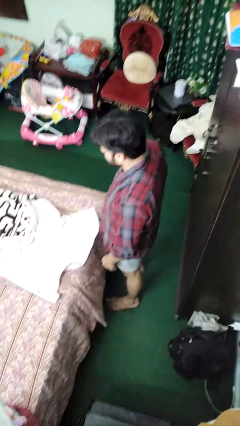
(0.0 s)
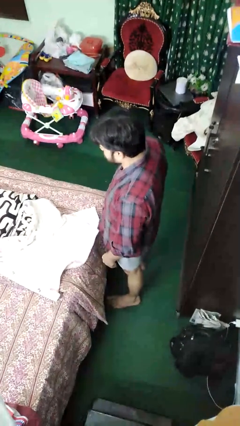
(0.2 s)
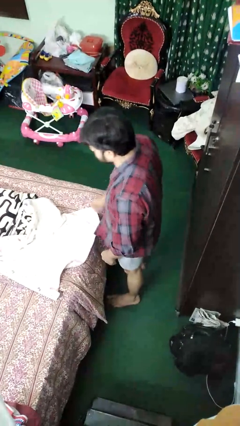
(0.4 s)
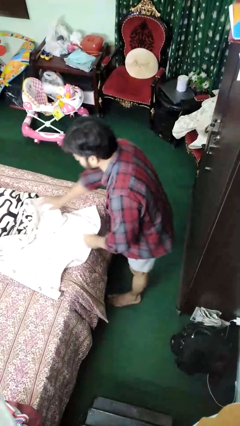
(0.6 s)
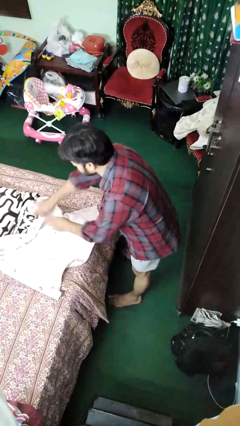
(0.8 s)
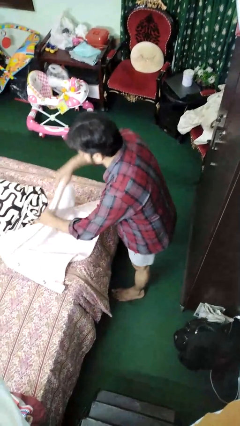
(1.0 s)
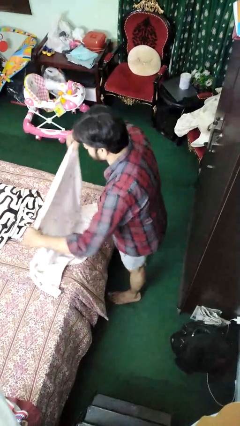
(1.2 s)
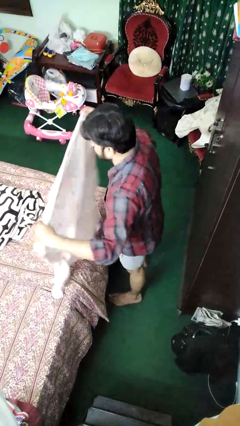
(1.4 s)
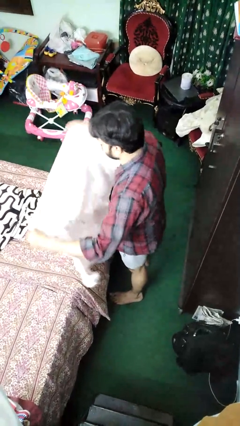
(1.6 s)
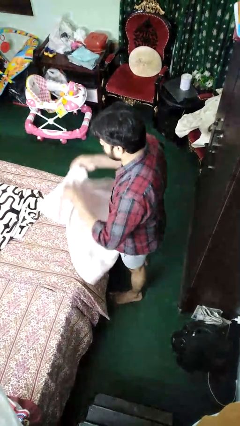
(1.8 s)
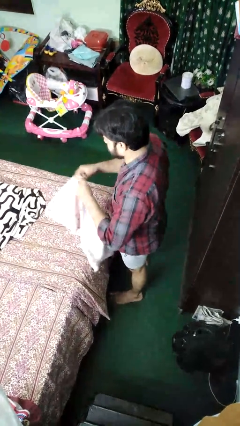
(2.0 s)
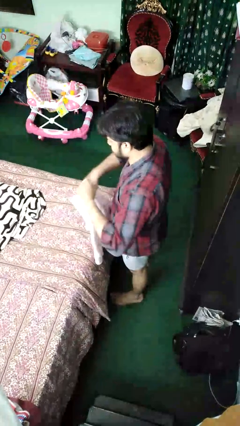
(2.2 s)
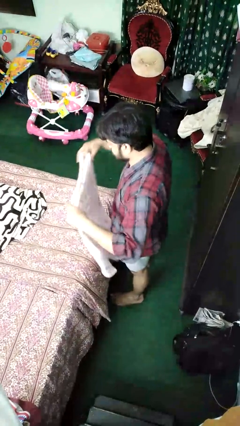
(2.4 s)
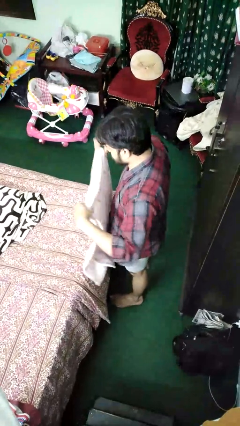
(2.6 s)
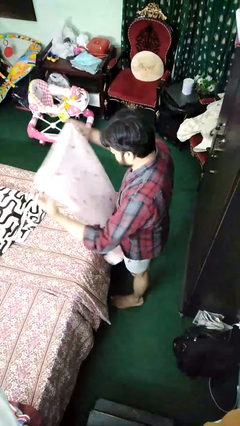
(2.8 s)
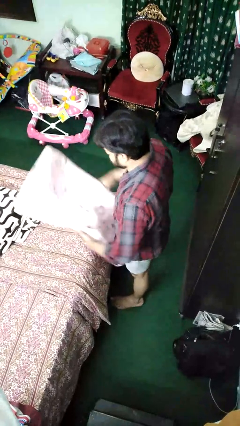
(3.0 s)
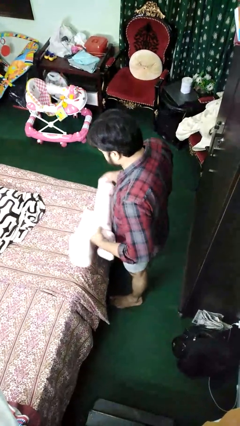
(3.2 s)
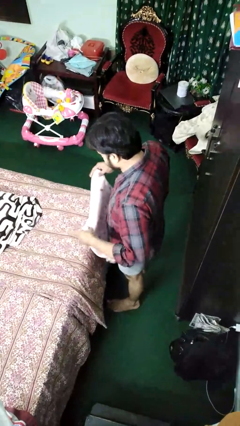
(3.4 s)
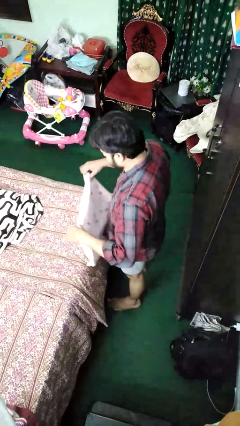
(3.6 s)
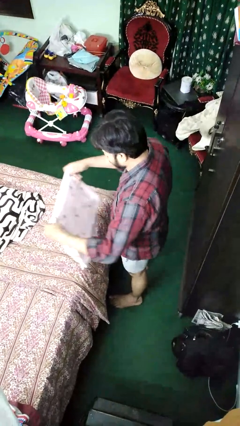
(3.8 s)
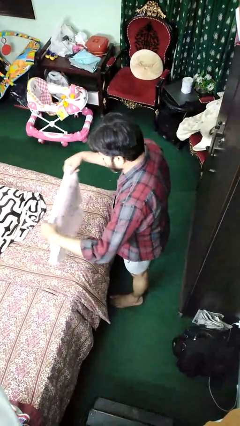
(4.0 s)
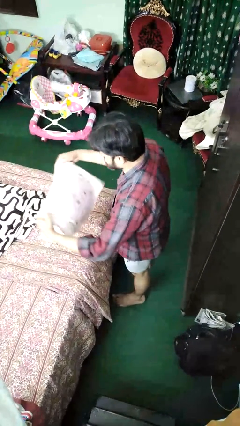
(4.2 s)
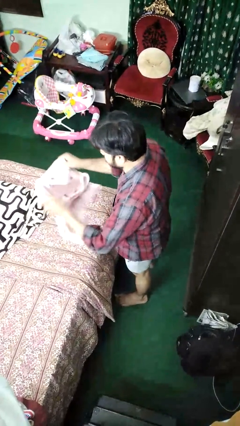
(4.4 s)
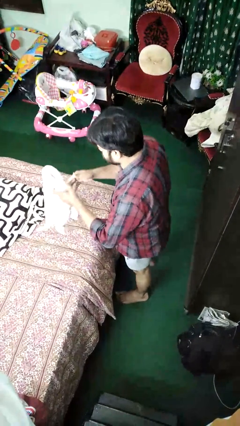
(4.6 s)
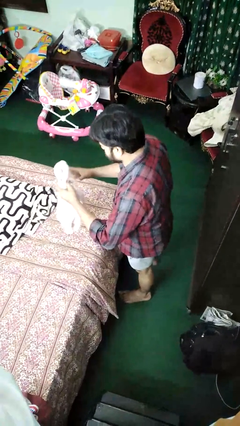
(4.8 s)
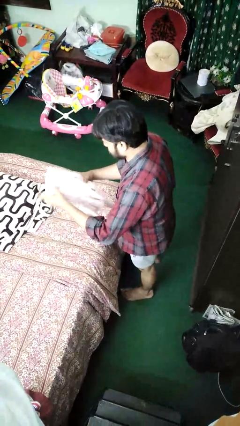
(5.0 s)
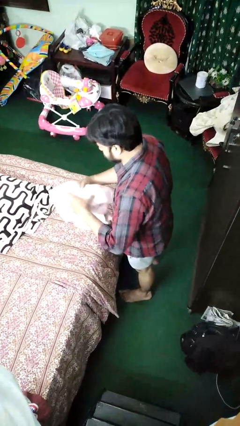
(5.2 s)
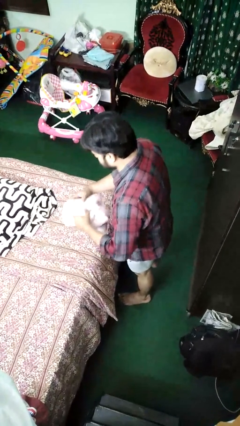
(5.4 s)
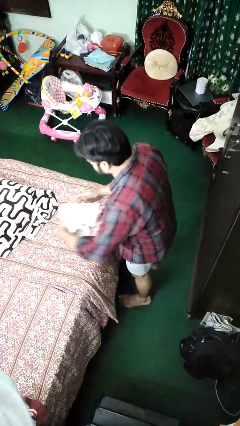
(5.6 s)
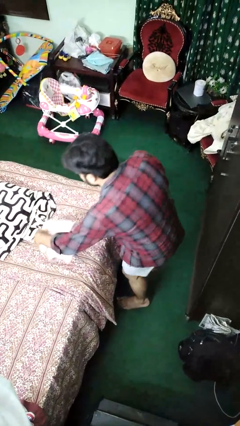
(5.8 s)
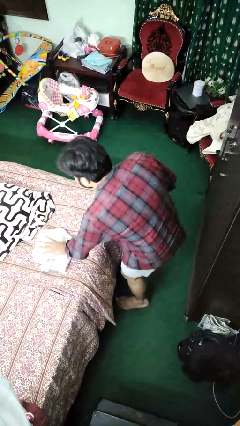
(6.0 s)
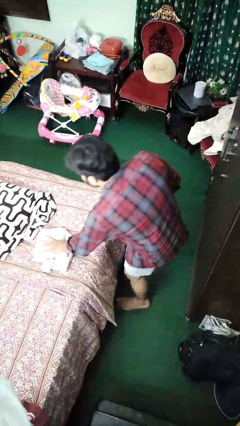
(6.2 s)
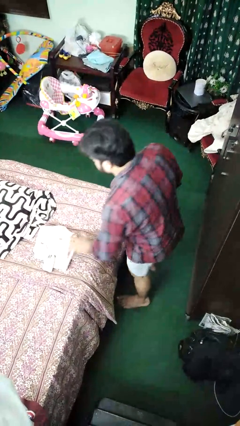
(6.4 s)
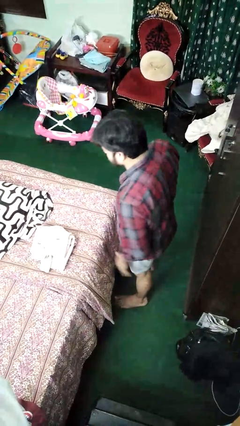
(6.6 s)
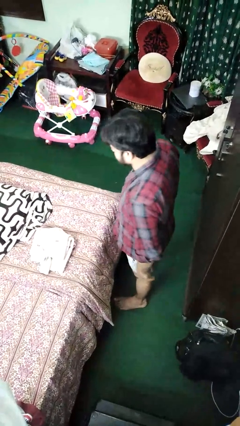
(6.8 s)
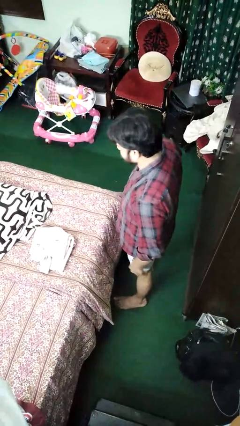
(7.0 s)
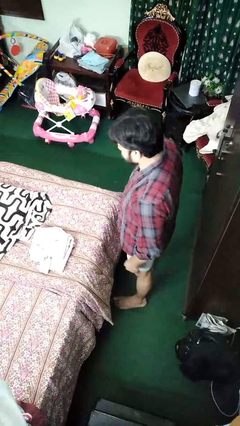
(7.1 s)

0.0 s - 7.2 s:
person folds blanket

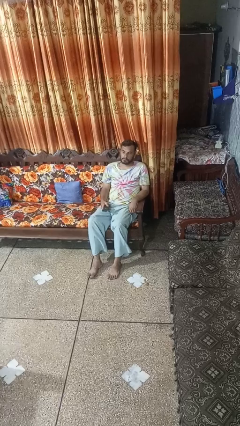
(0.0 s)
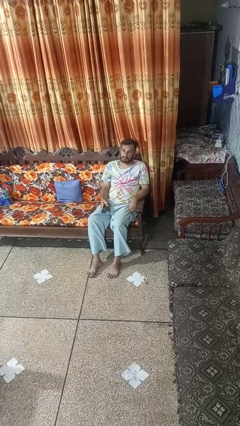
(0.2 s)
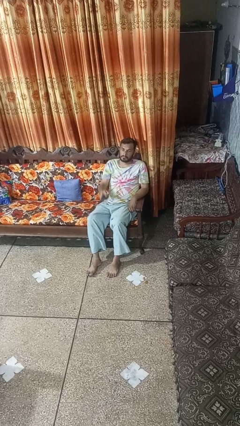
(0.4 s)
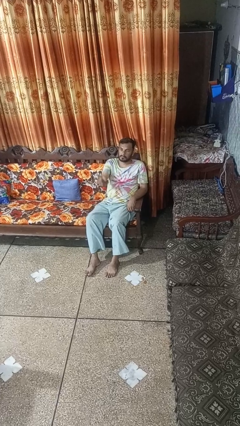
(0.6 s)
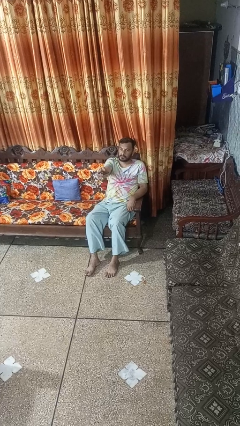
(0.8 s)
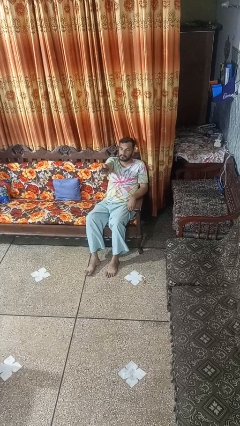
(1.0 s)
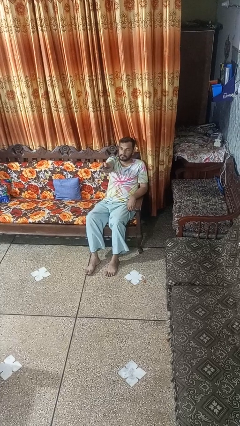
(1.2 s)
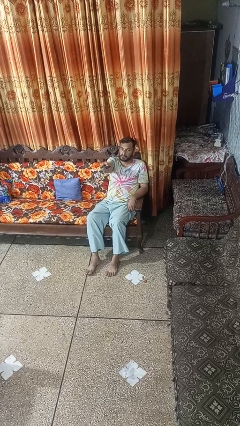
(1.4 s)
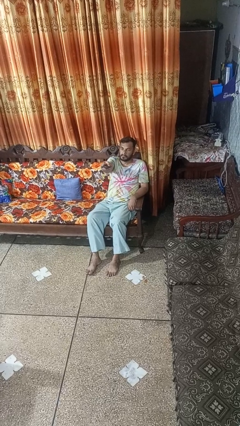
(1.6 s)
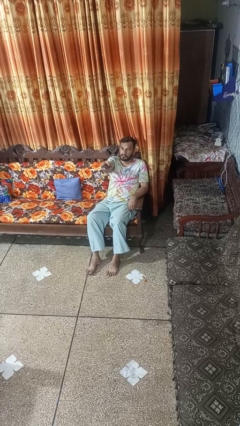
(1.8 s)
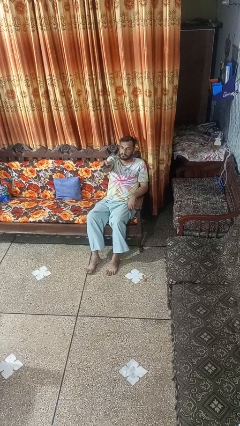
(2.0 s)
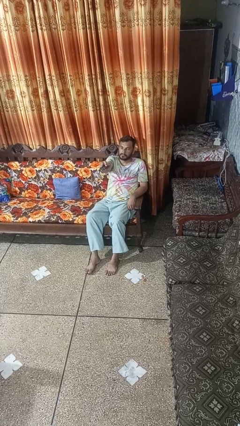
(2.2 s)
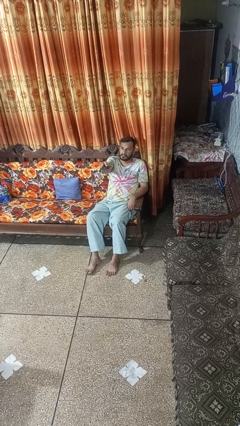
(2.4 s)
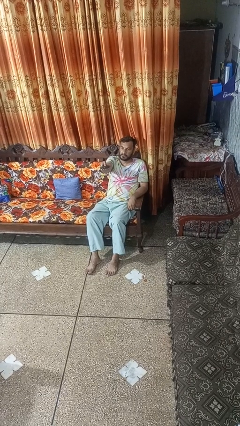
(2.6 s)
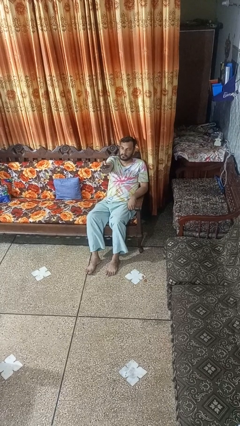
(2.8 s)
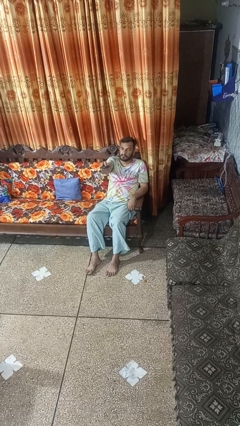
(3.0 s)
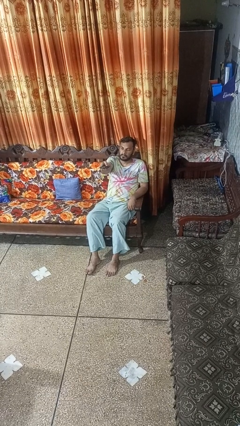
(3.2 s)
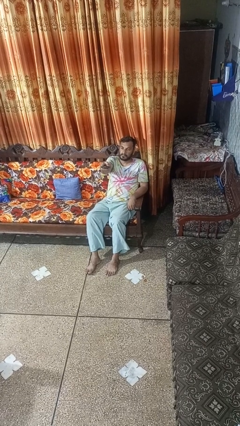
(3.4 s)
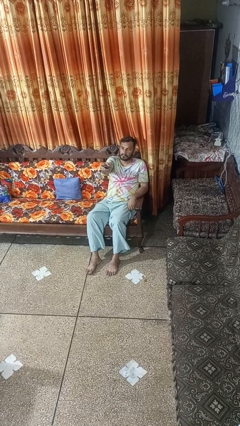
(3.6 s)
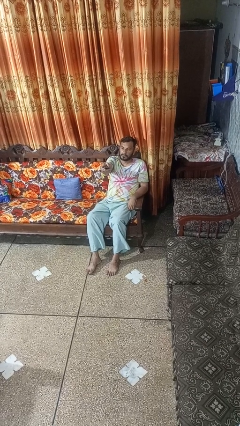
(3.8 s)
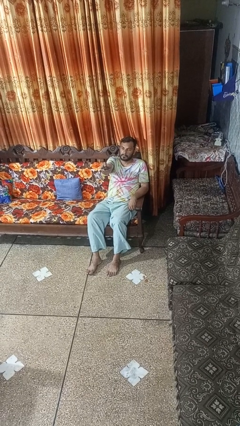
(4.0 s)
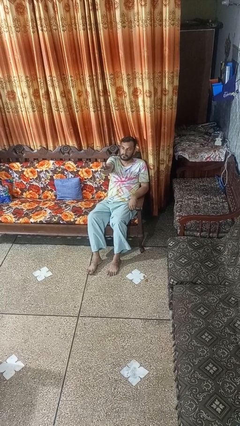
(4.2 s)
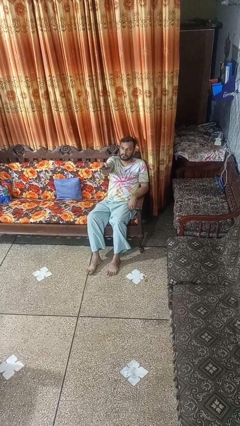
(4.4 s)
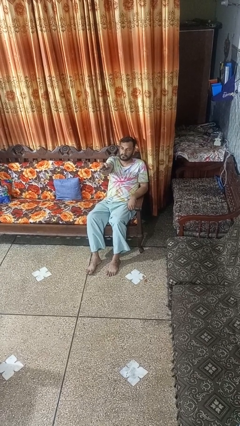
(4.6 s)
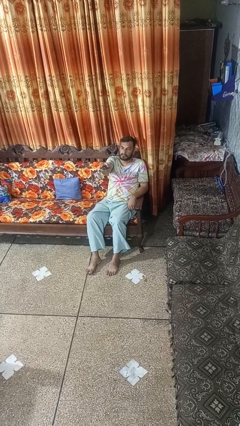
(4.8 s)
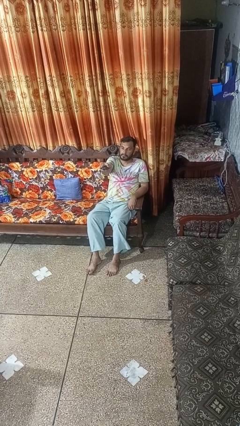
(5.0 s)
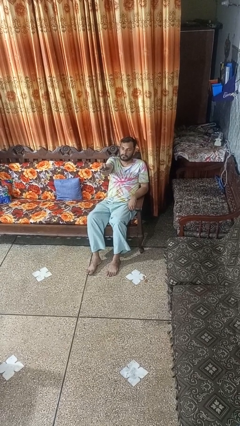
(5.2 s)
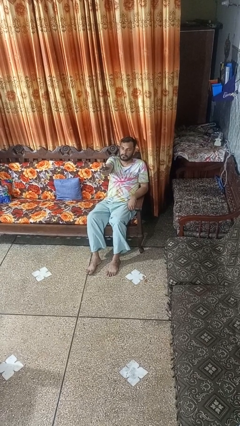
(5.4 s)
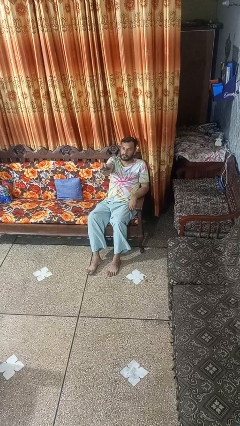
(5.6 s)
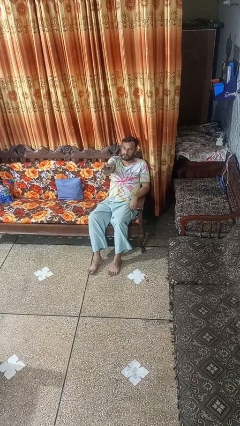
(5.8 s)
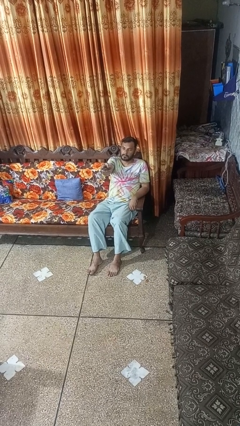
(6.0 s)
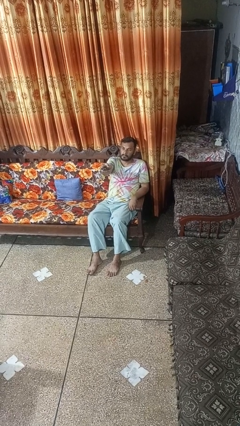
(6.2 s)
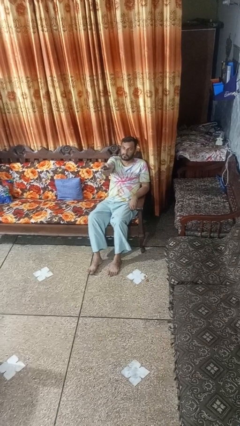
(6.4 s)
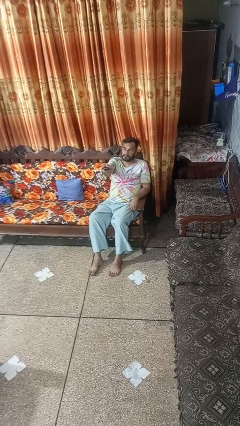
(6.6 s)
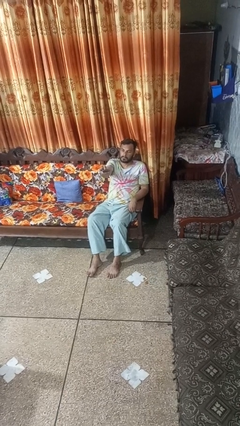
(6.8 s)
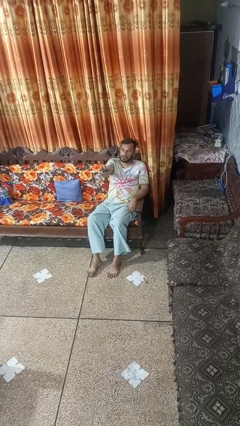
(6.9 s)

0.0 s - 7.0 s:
person uses television remote

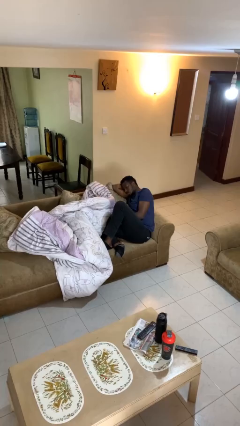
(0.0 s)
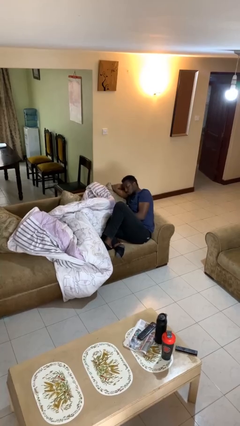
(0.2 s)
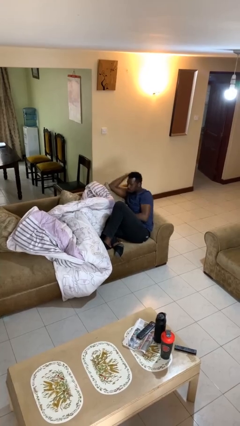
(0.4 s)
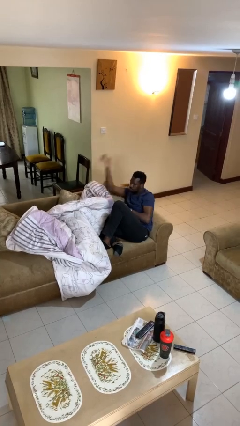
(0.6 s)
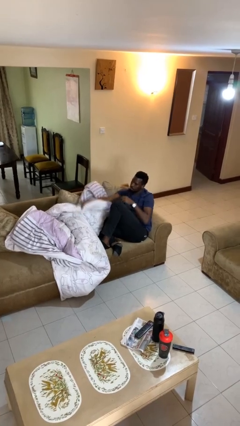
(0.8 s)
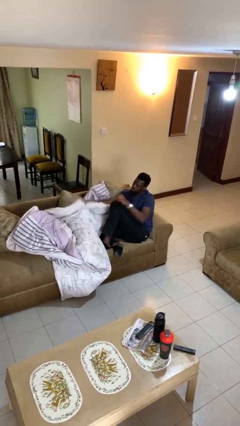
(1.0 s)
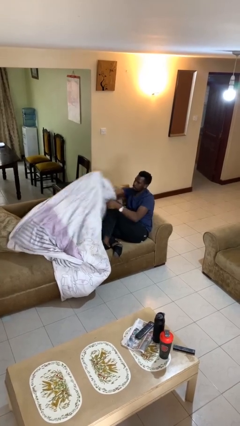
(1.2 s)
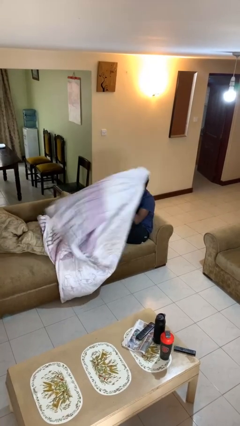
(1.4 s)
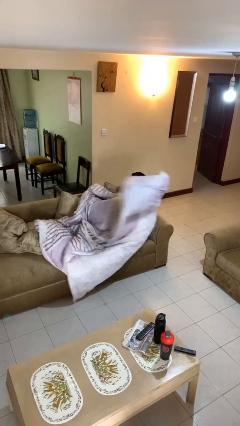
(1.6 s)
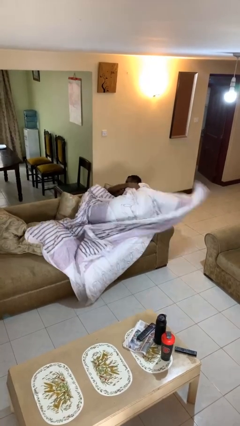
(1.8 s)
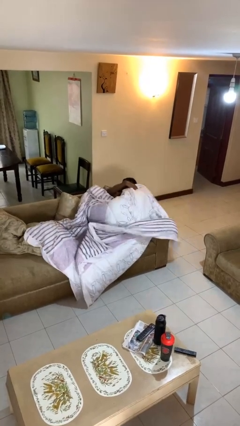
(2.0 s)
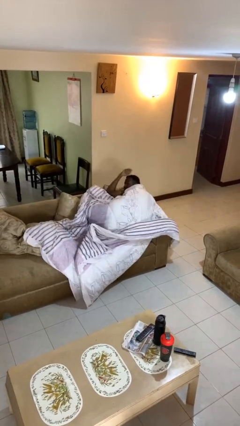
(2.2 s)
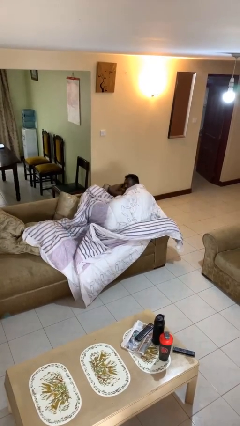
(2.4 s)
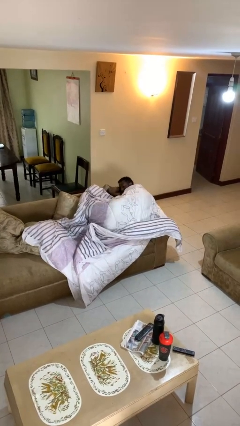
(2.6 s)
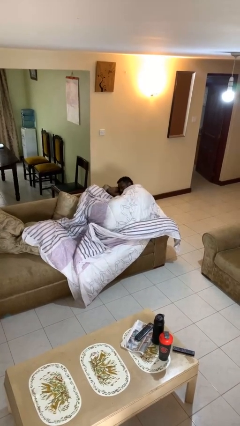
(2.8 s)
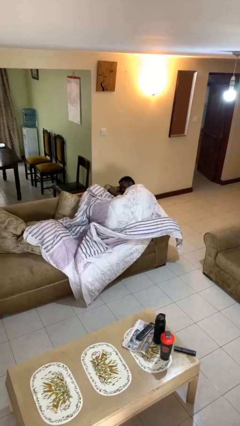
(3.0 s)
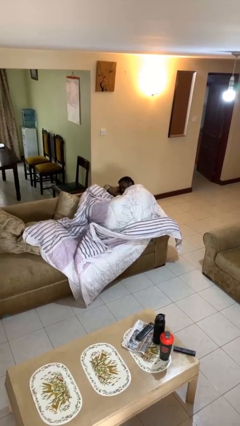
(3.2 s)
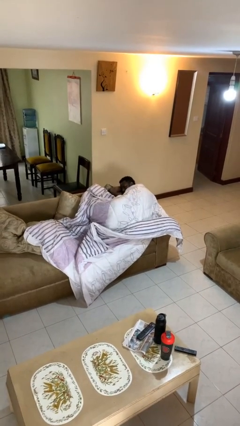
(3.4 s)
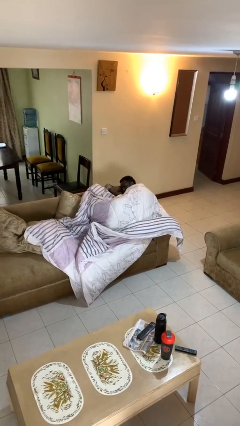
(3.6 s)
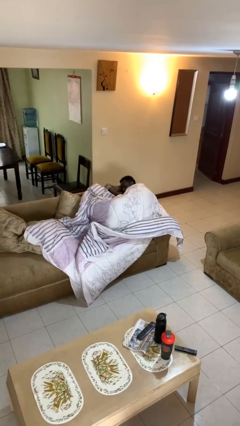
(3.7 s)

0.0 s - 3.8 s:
person covers with blanket
